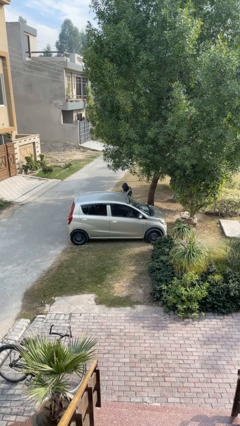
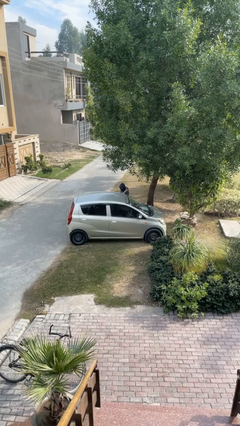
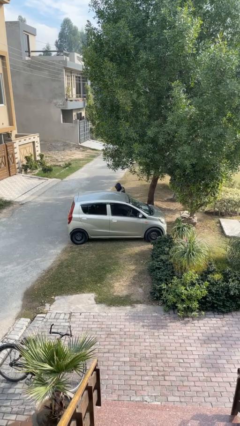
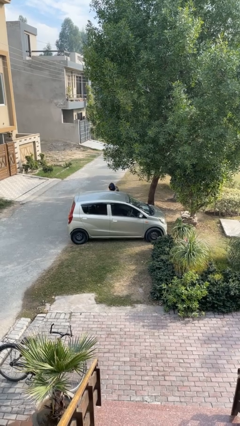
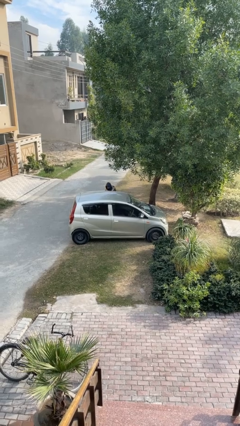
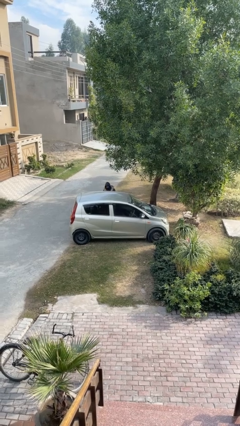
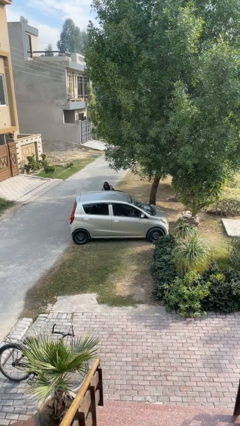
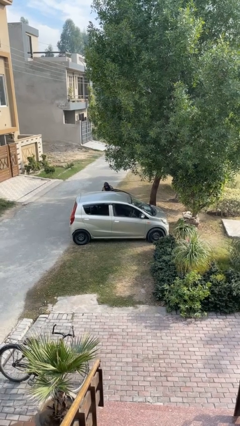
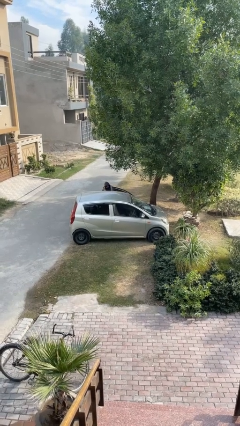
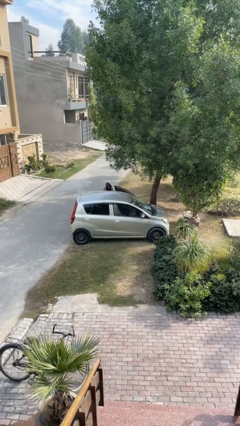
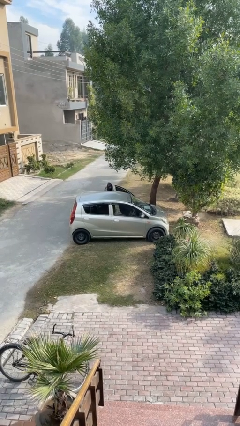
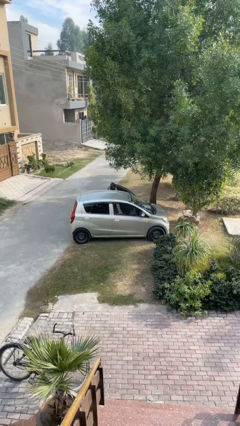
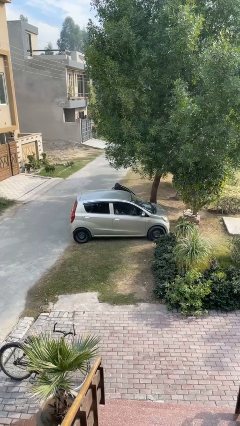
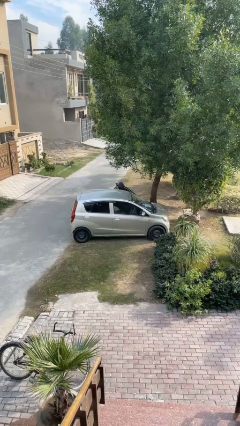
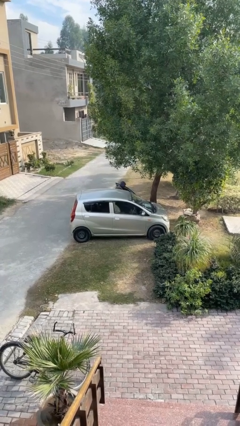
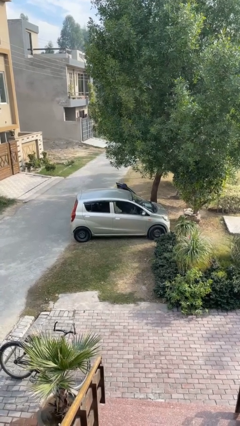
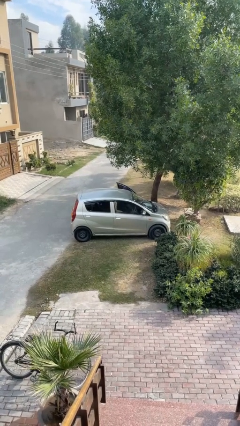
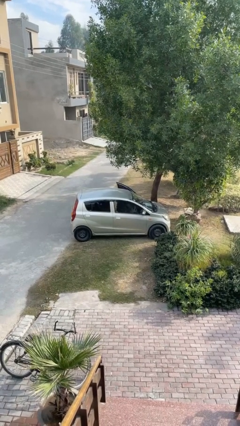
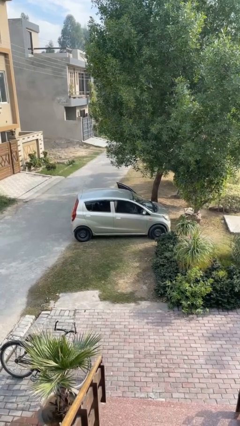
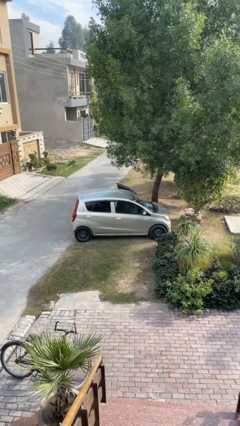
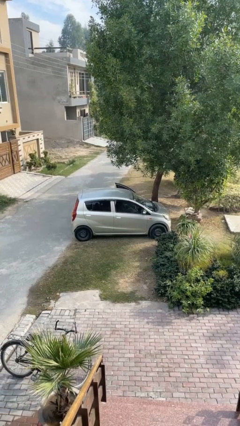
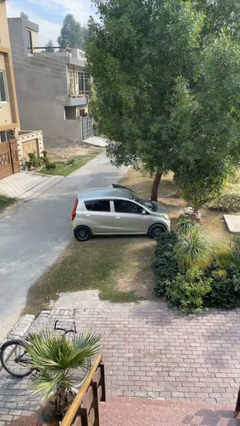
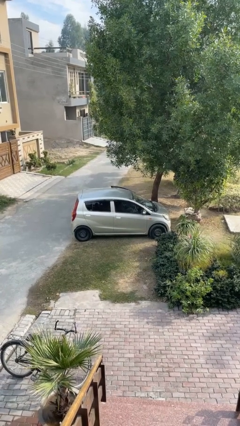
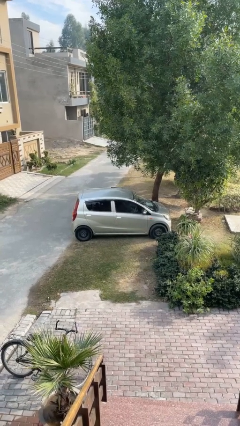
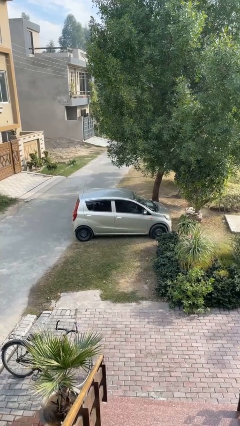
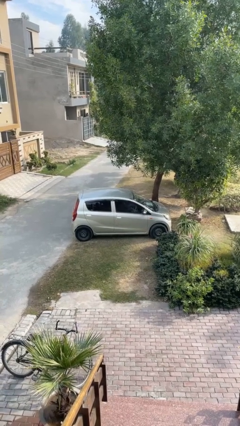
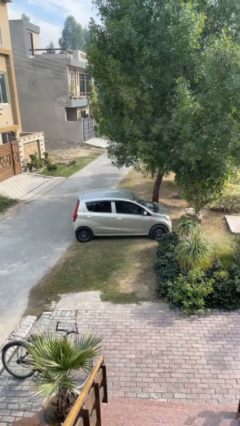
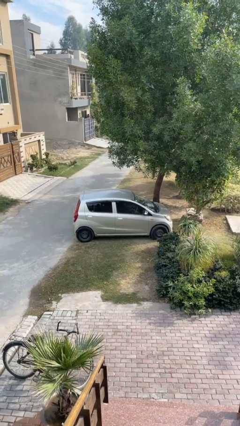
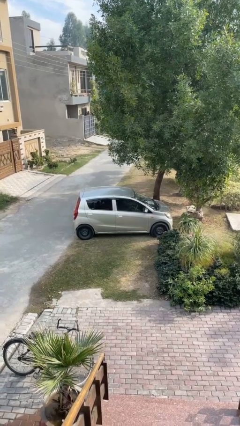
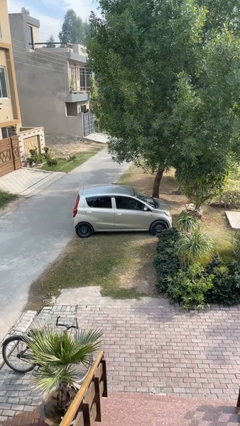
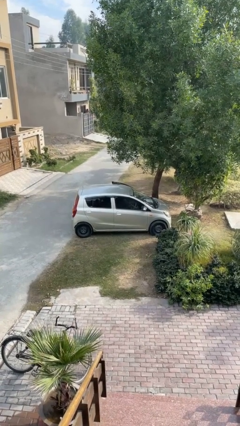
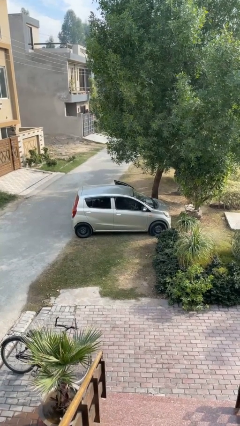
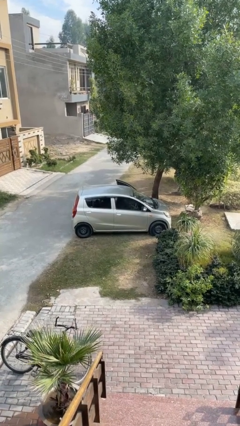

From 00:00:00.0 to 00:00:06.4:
car picks up person

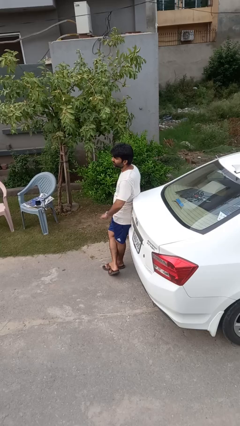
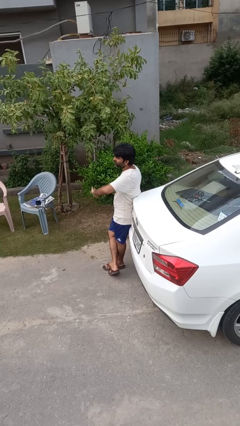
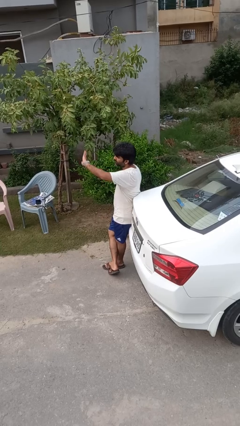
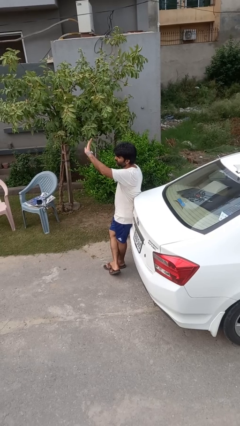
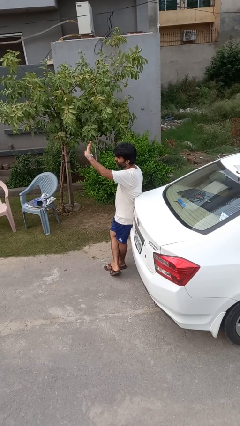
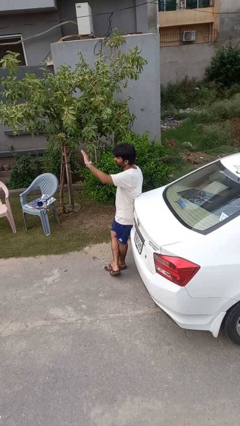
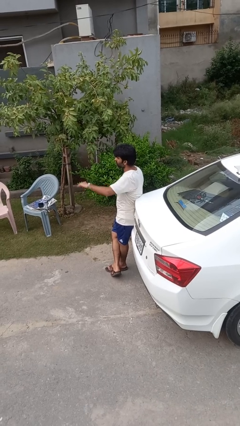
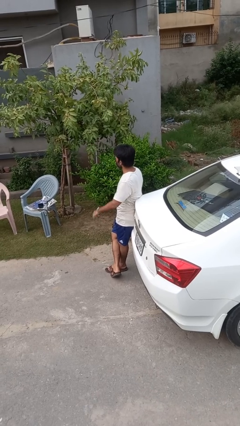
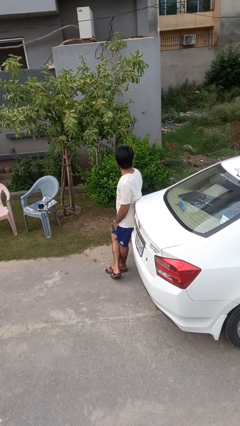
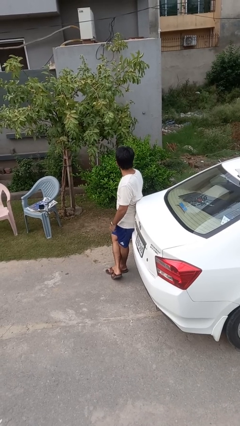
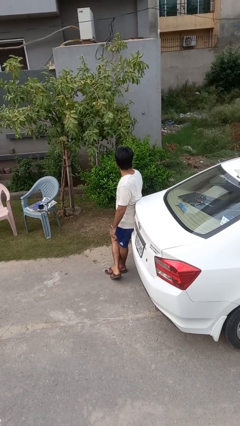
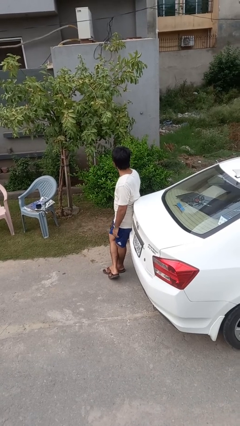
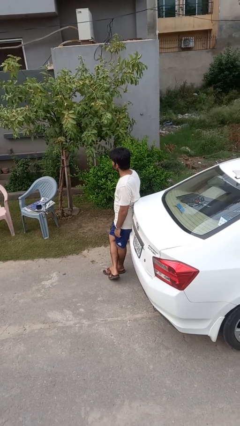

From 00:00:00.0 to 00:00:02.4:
person gestures swipe up

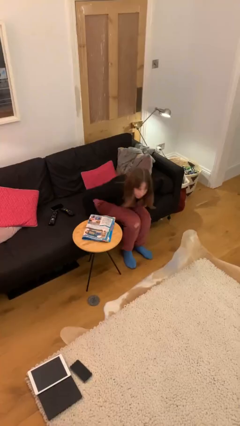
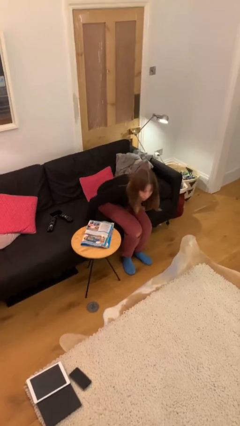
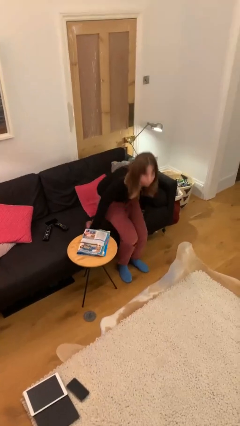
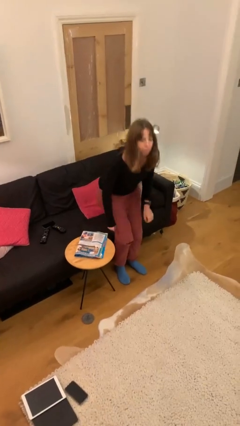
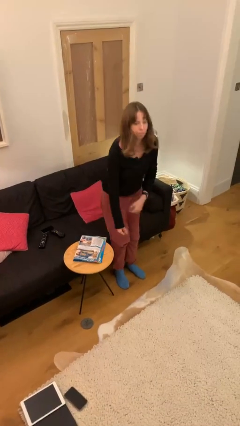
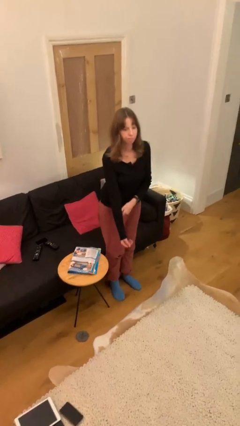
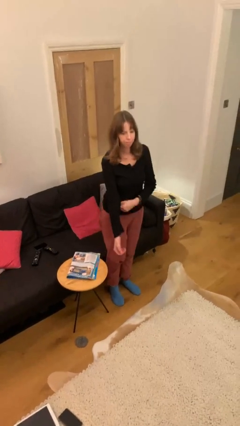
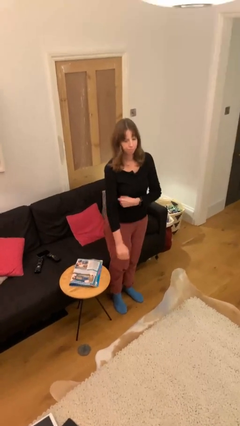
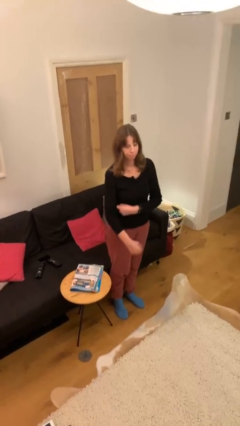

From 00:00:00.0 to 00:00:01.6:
person stands up

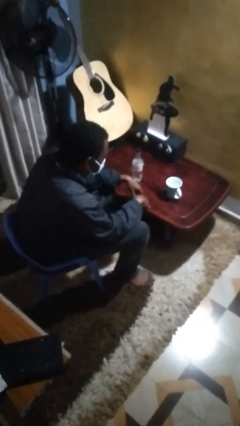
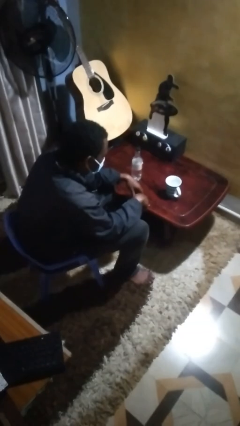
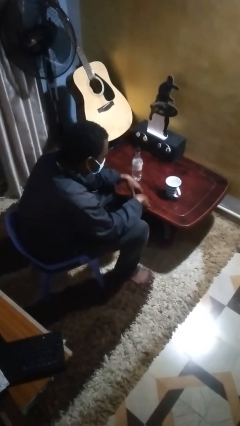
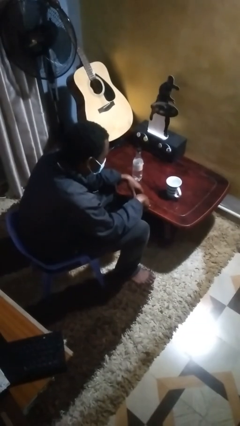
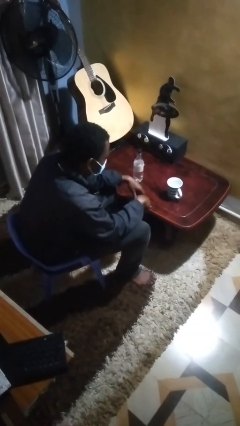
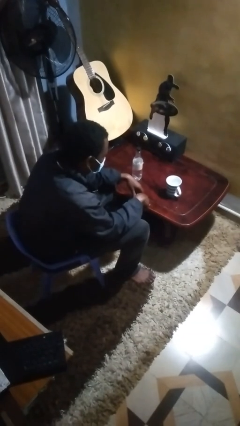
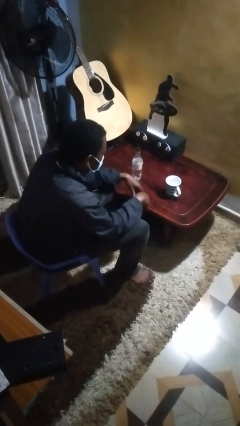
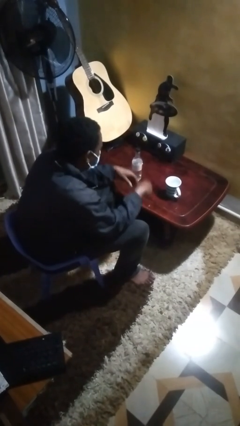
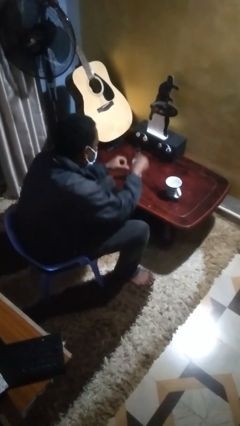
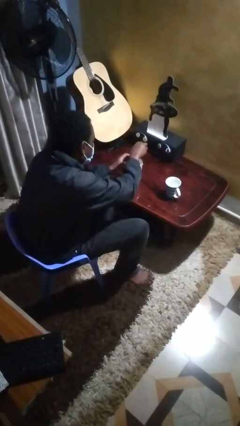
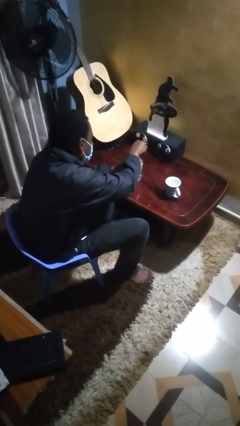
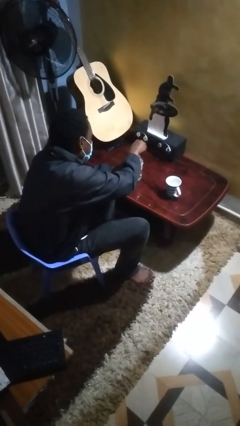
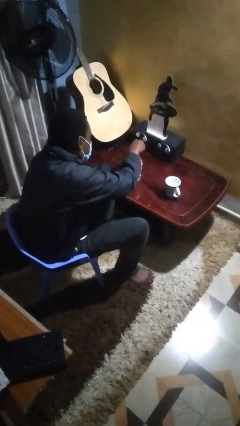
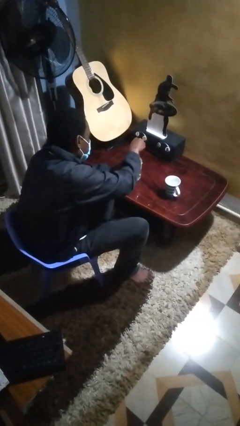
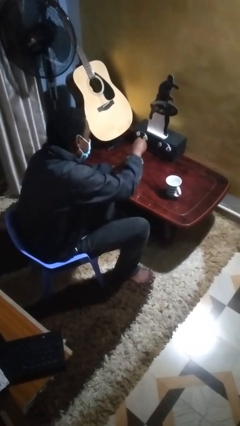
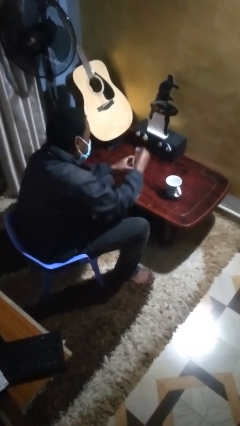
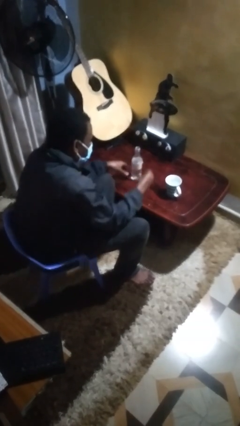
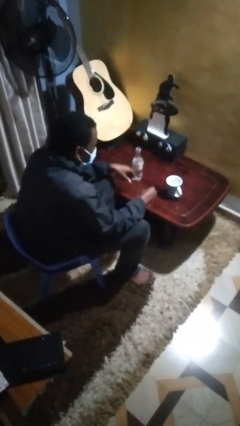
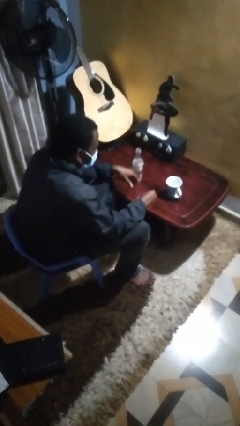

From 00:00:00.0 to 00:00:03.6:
person unscrews lid from bottle

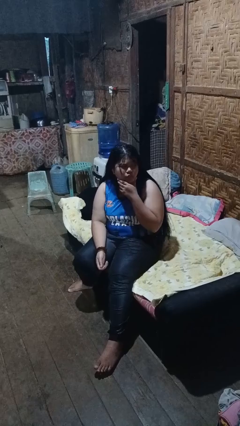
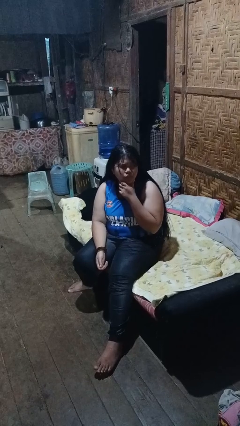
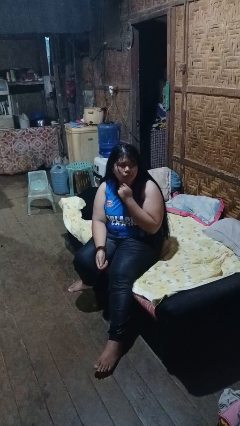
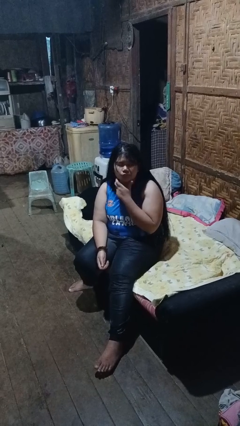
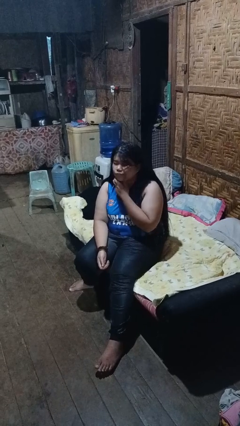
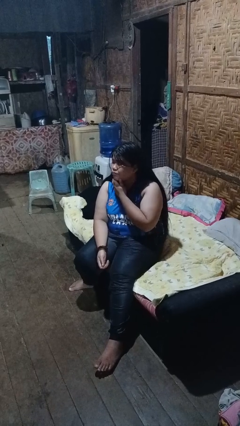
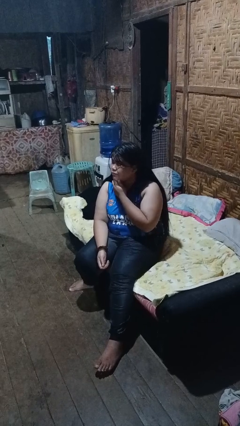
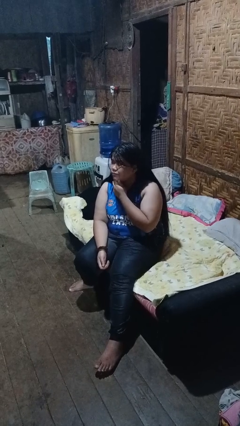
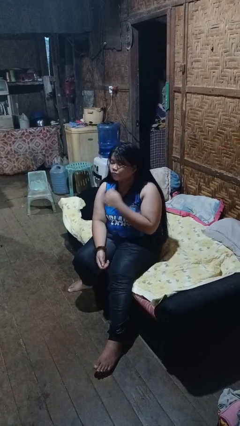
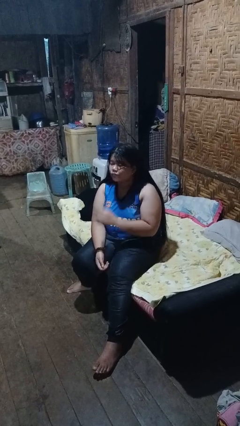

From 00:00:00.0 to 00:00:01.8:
person strokes chin

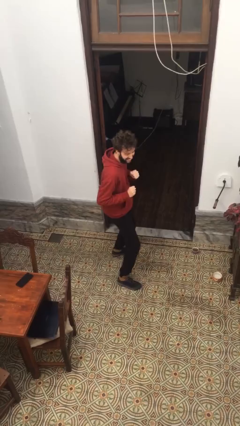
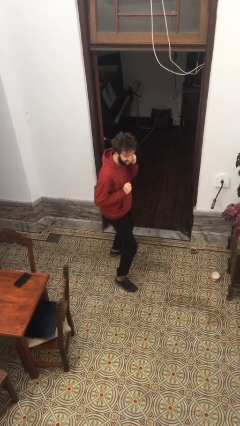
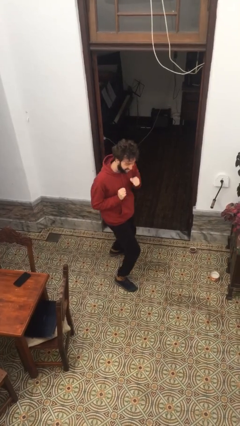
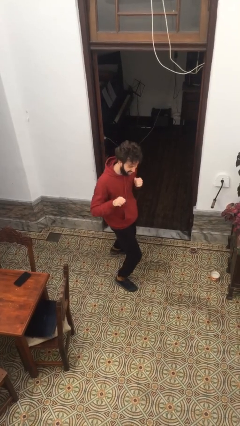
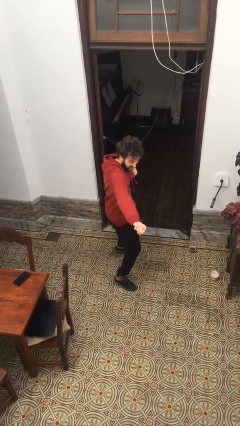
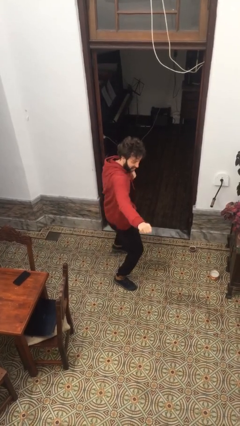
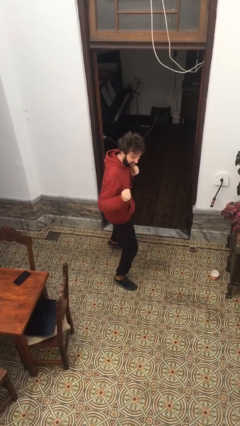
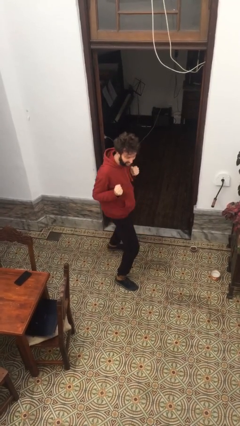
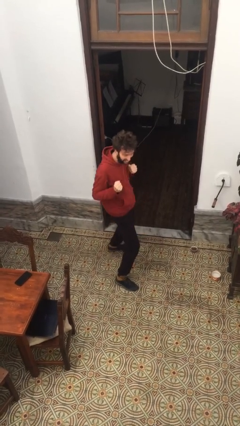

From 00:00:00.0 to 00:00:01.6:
person karate chop
